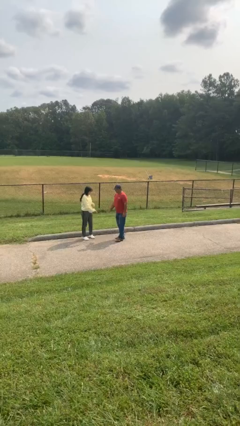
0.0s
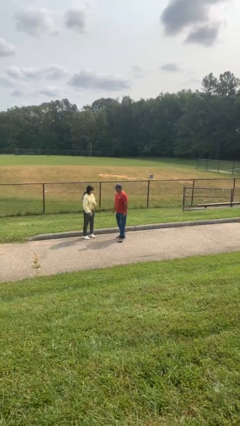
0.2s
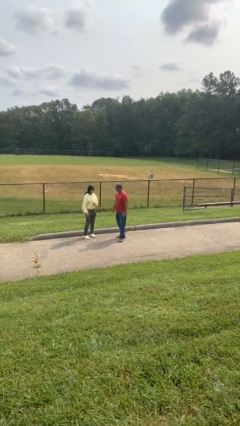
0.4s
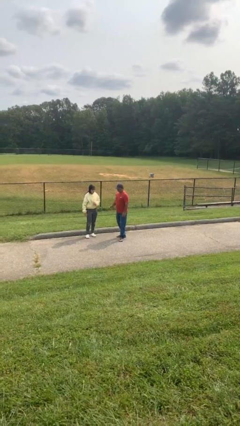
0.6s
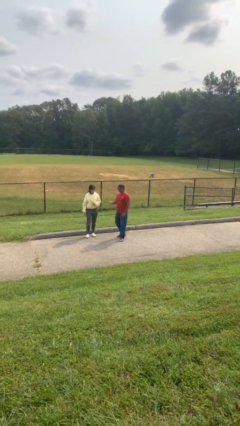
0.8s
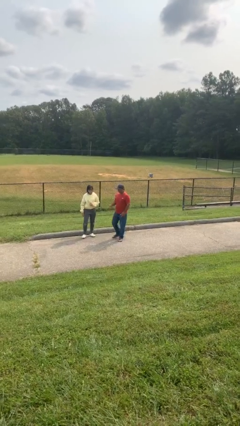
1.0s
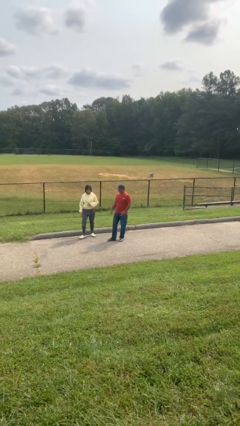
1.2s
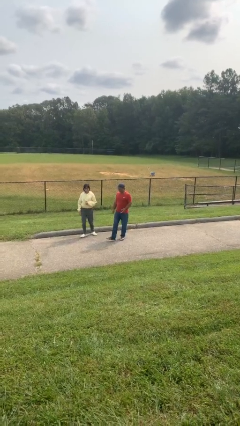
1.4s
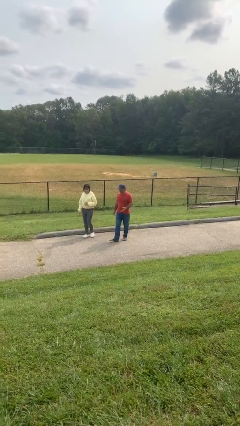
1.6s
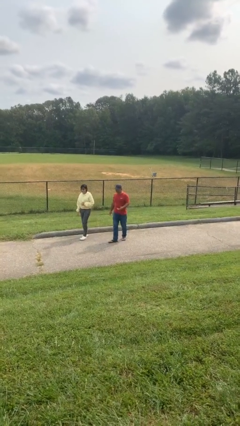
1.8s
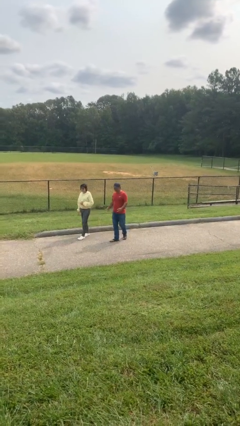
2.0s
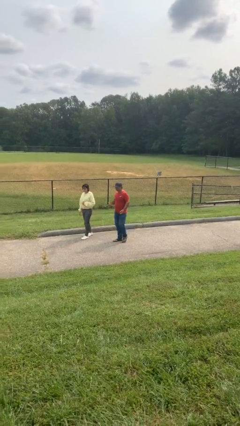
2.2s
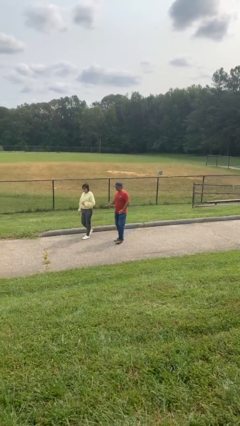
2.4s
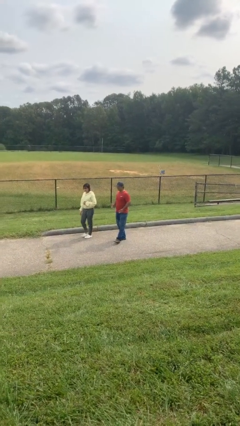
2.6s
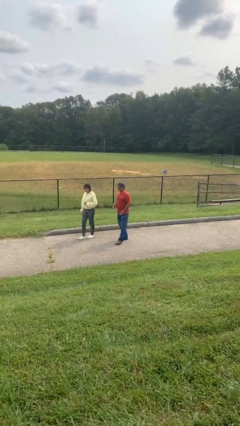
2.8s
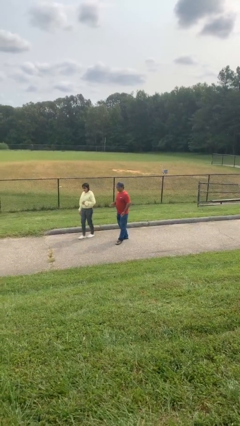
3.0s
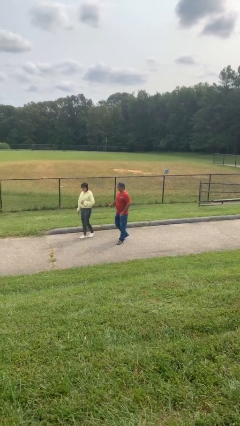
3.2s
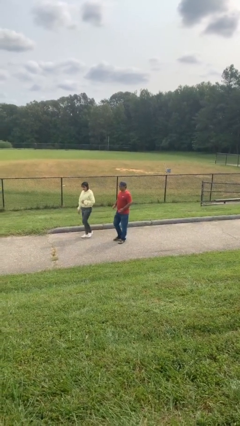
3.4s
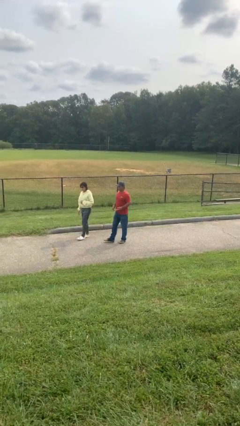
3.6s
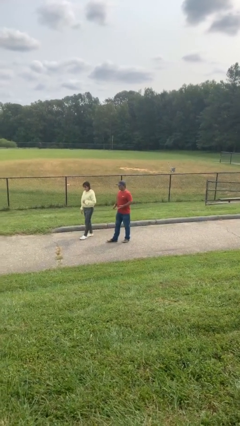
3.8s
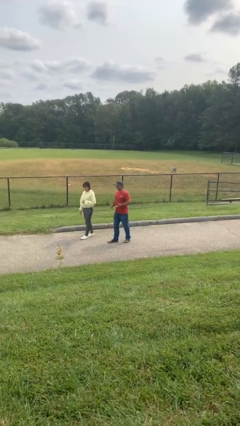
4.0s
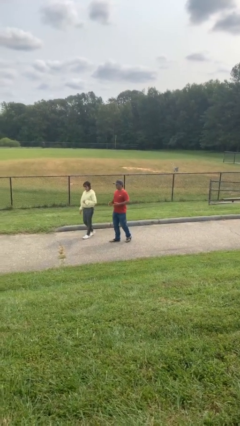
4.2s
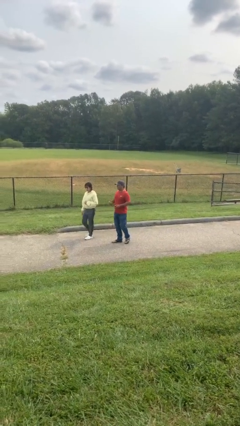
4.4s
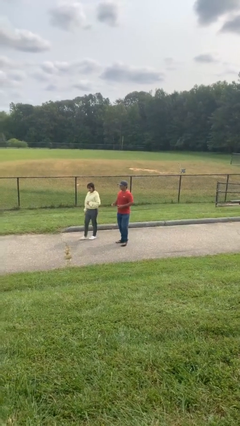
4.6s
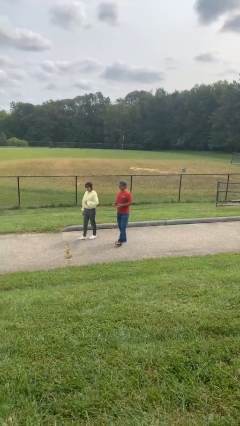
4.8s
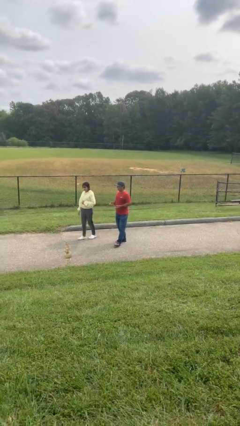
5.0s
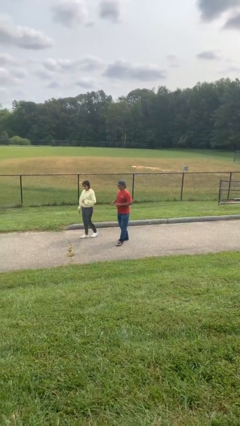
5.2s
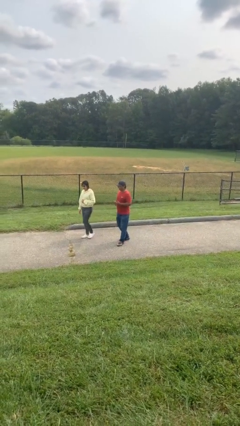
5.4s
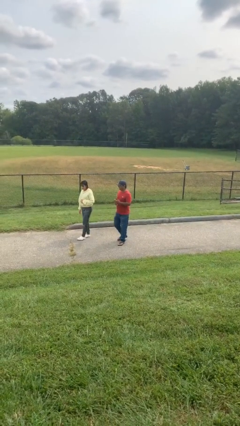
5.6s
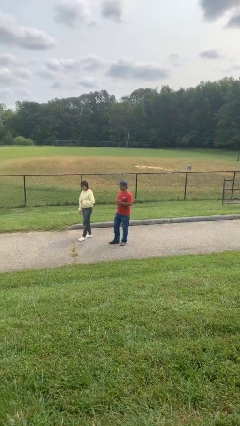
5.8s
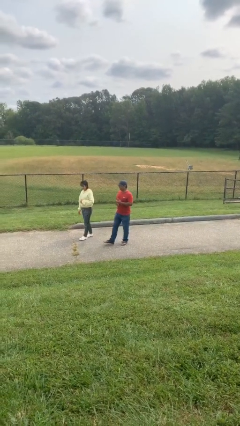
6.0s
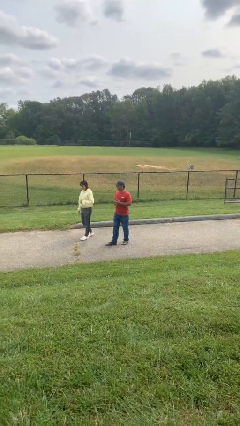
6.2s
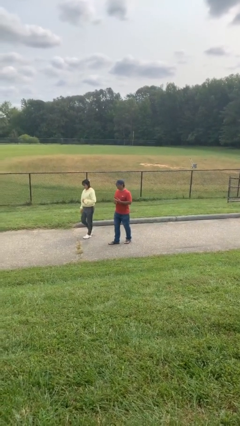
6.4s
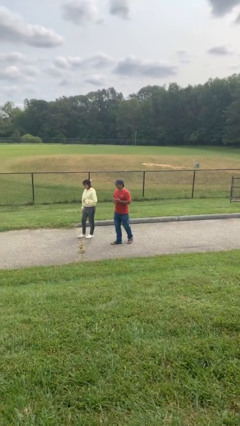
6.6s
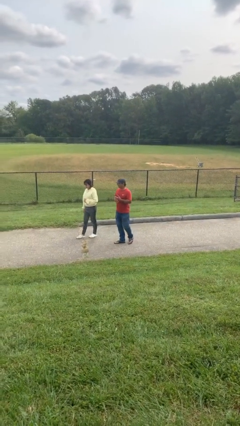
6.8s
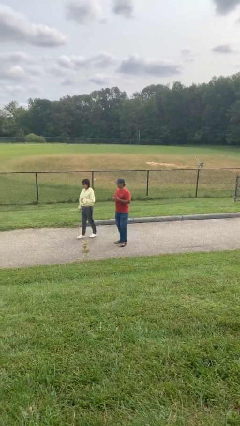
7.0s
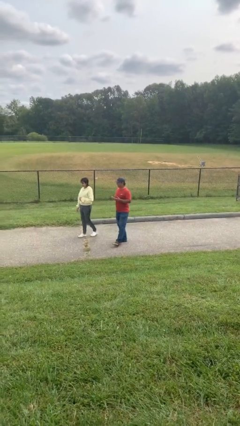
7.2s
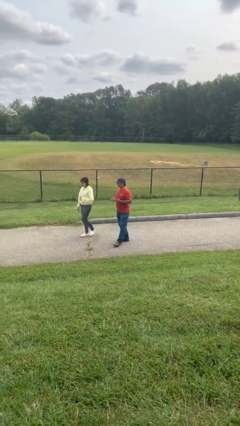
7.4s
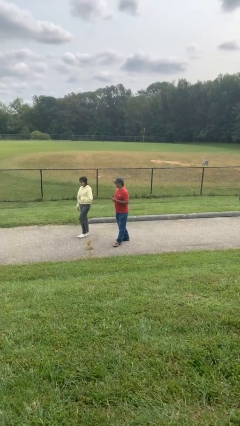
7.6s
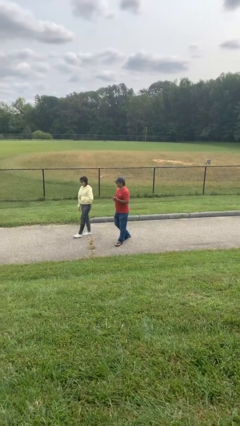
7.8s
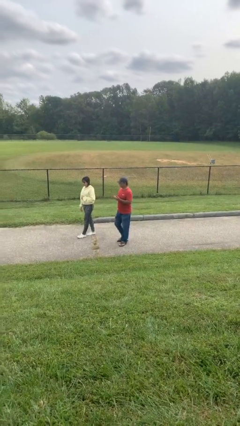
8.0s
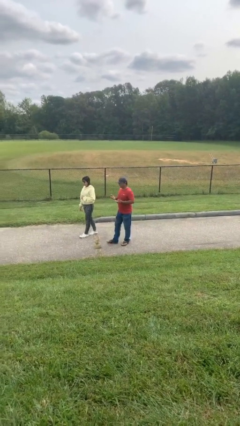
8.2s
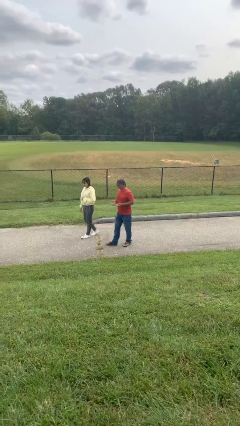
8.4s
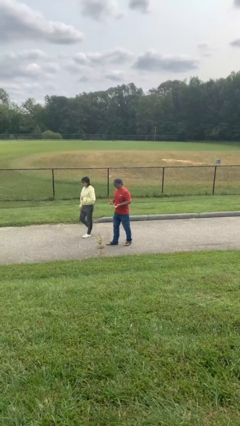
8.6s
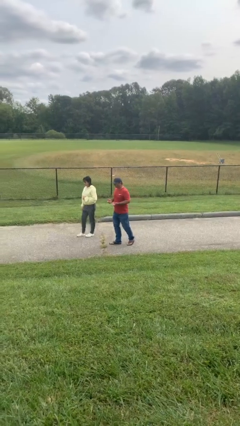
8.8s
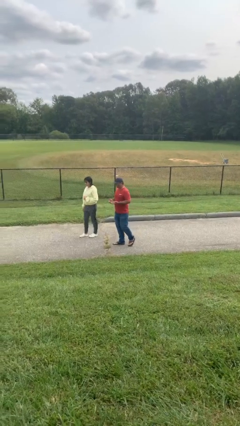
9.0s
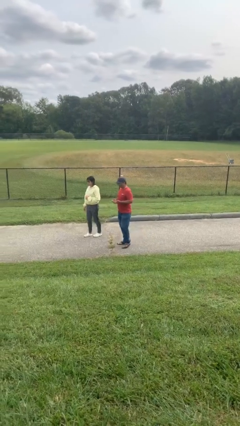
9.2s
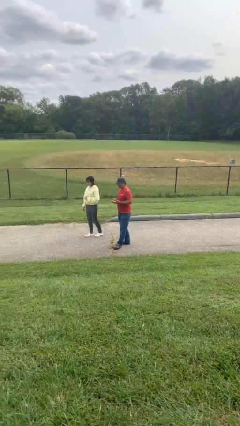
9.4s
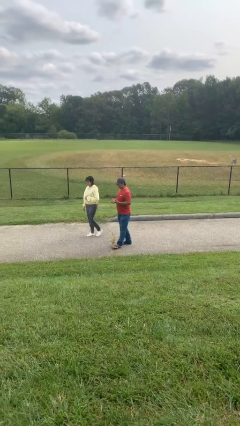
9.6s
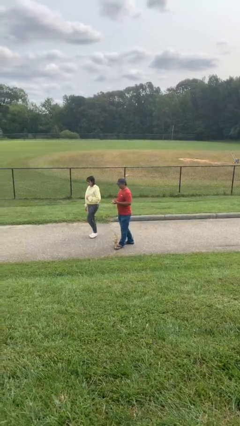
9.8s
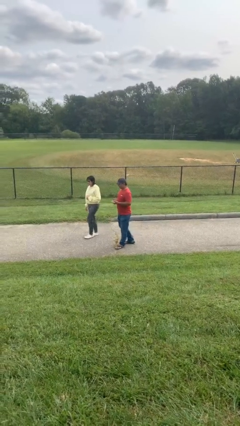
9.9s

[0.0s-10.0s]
person talks to person

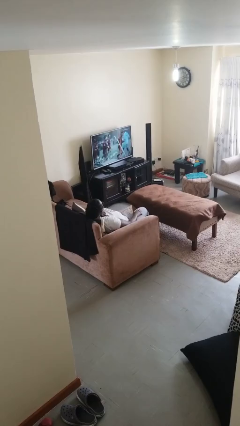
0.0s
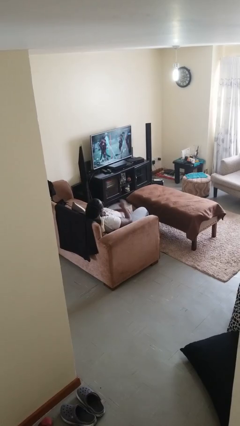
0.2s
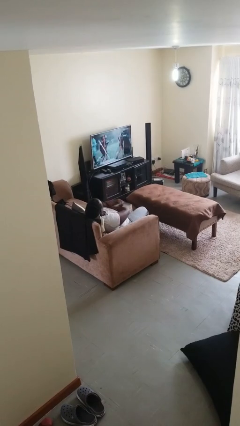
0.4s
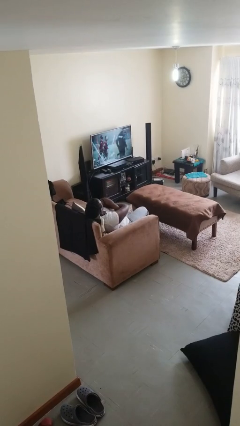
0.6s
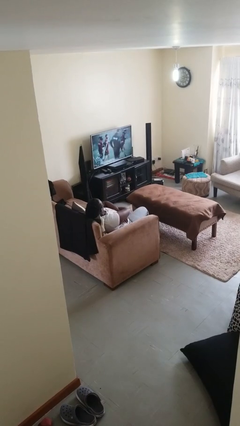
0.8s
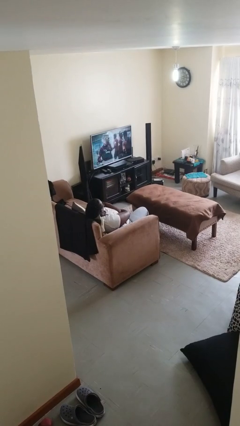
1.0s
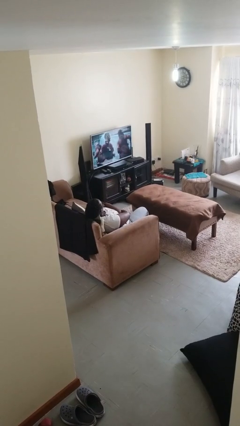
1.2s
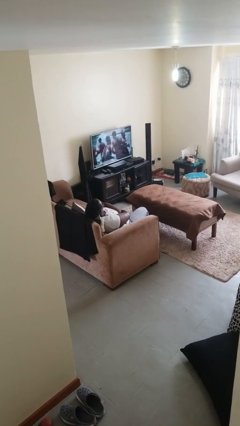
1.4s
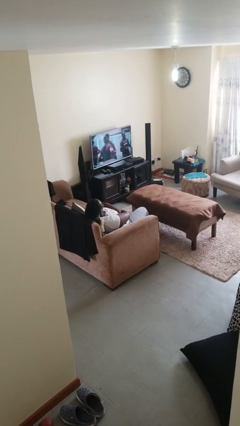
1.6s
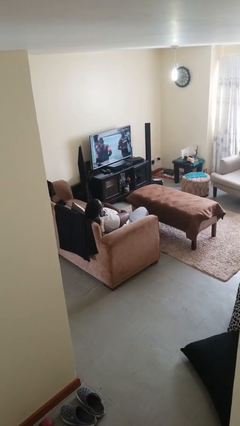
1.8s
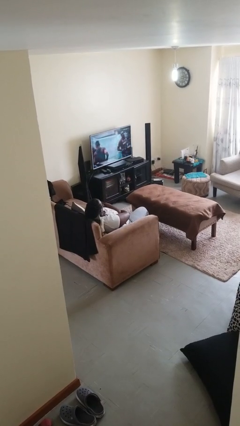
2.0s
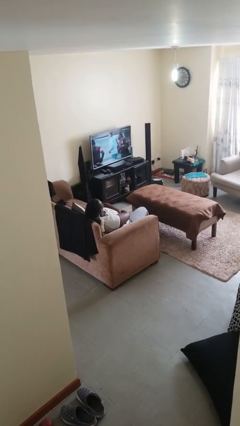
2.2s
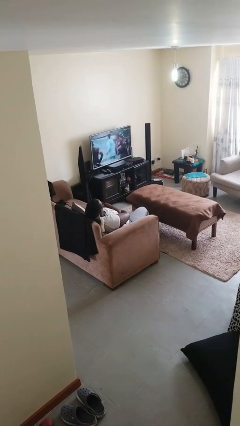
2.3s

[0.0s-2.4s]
person crosses arms

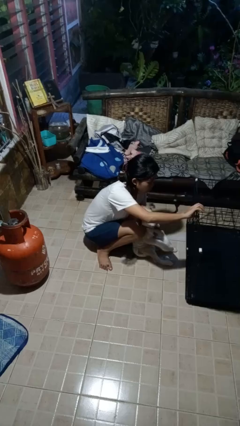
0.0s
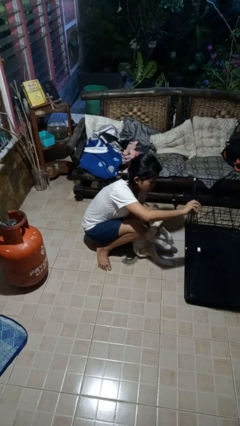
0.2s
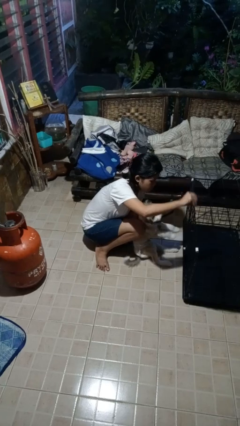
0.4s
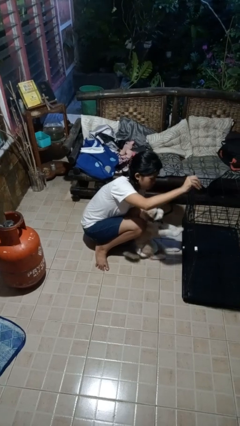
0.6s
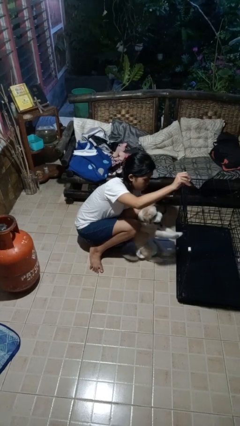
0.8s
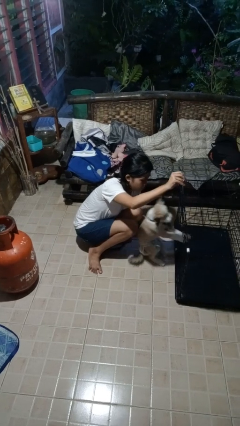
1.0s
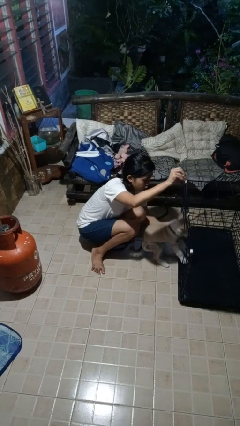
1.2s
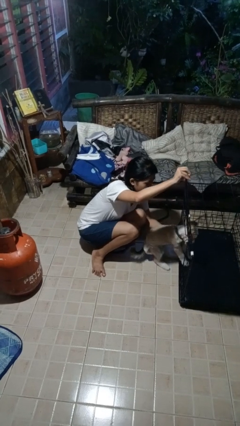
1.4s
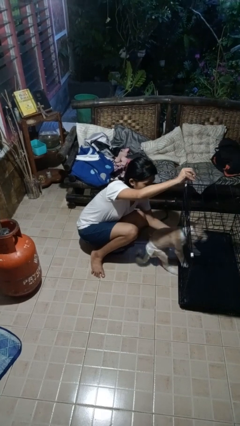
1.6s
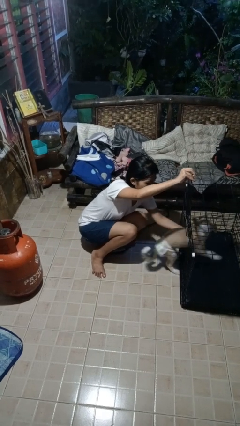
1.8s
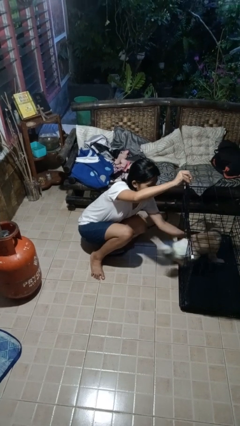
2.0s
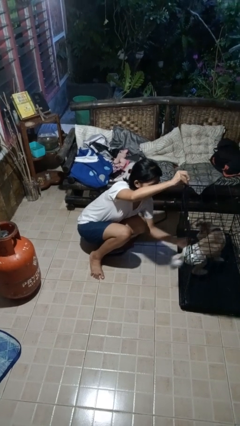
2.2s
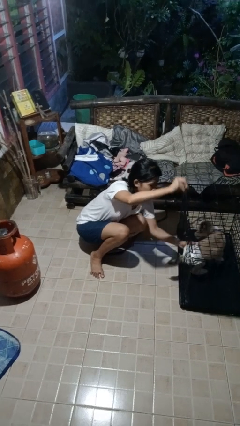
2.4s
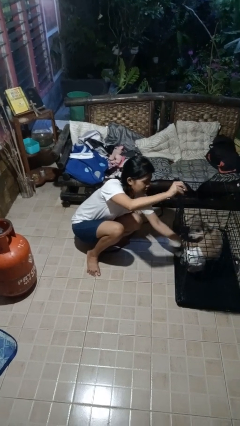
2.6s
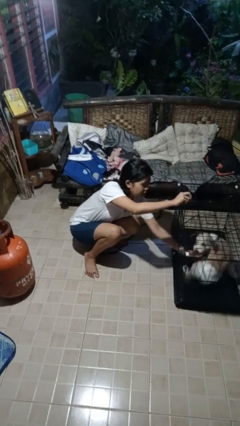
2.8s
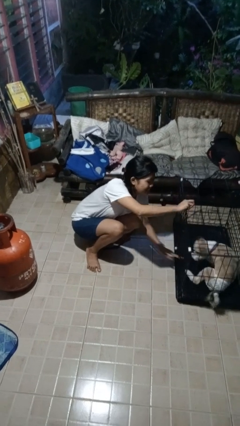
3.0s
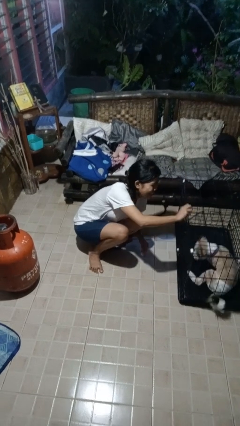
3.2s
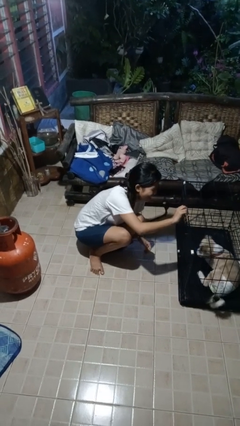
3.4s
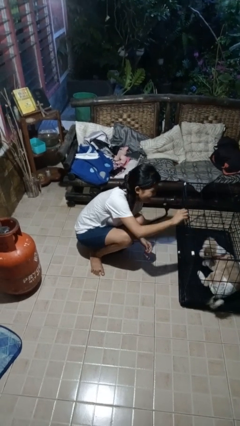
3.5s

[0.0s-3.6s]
person crates dog

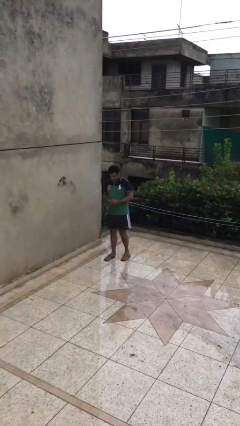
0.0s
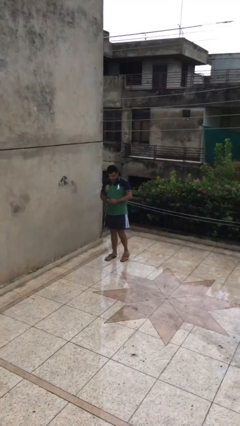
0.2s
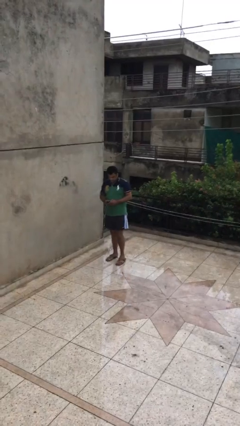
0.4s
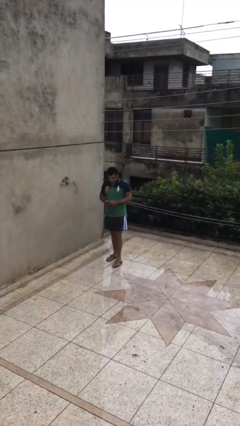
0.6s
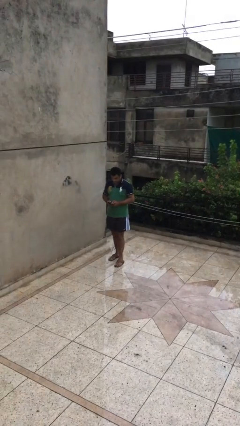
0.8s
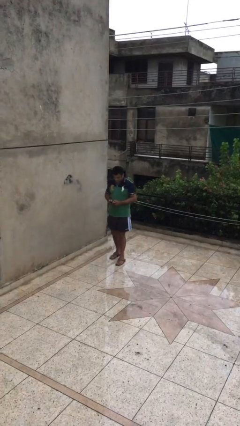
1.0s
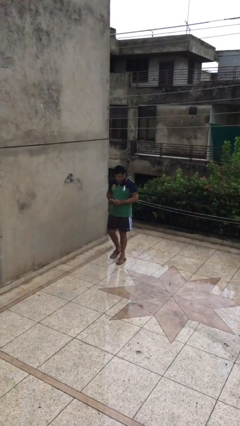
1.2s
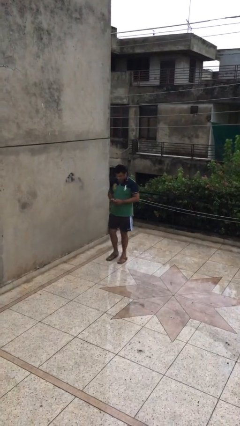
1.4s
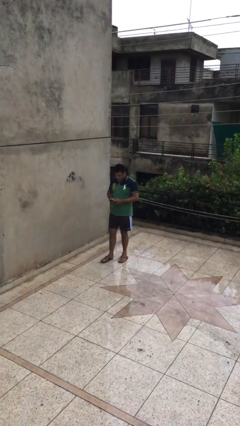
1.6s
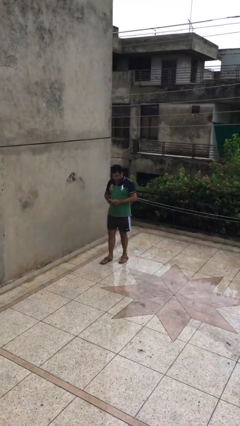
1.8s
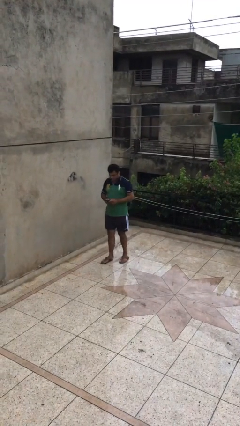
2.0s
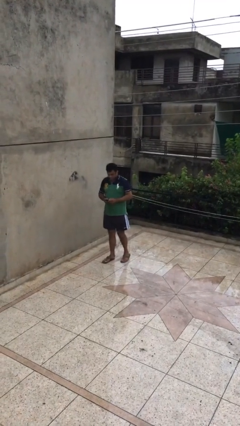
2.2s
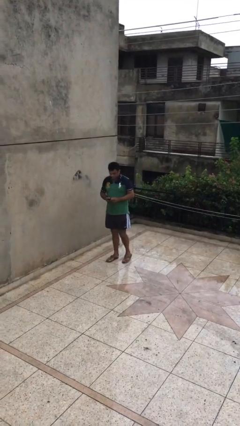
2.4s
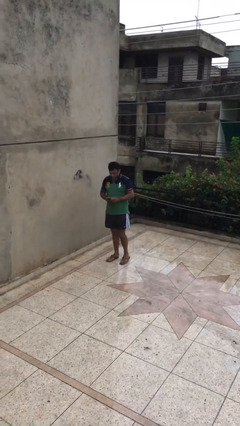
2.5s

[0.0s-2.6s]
person texts on phone
